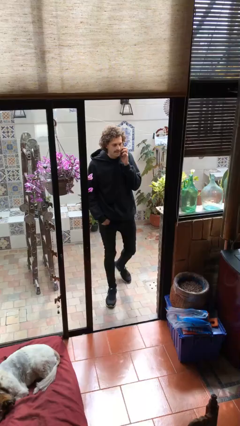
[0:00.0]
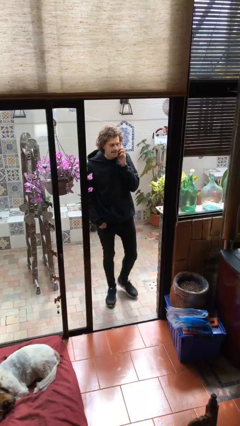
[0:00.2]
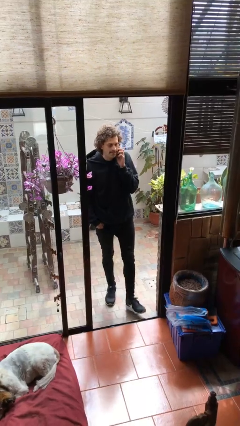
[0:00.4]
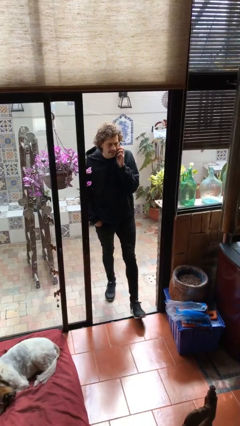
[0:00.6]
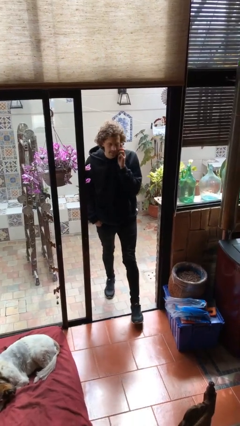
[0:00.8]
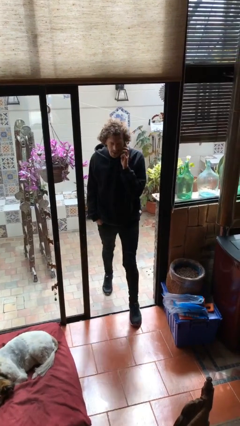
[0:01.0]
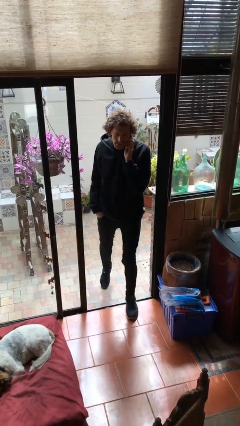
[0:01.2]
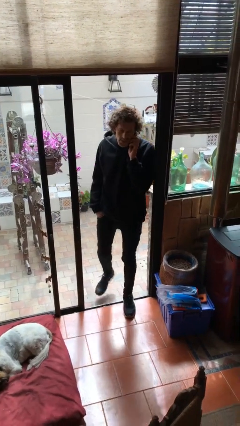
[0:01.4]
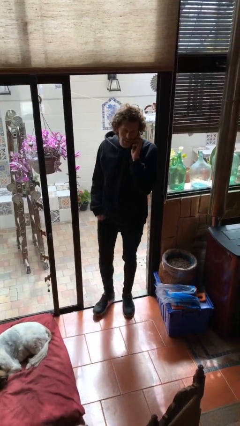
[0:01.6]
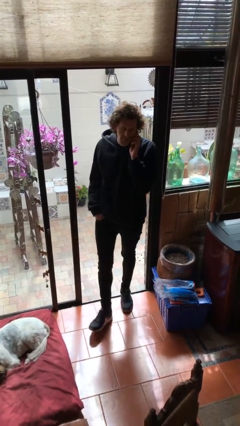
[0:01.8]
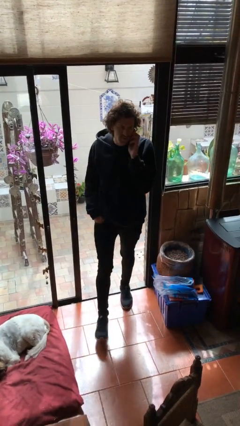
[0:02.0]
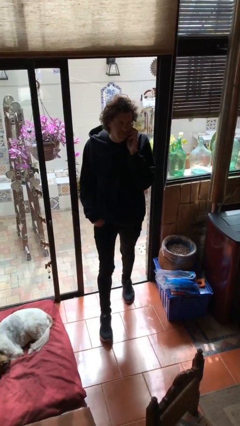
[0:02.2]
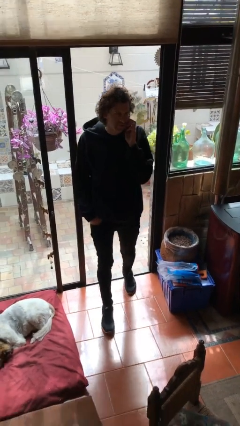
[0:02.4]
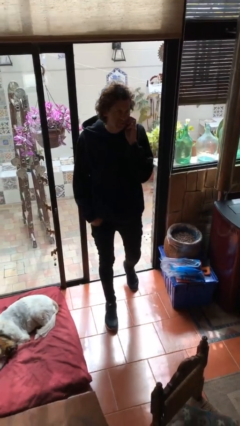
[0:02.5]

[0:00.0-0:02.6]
person enters scene through structure

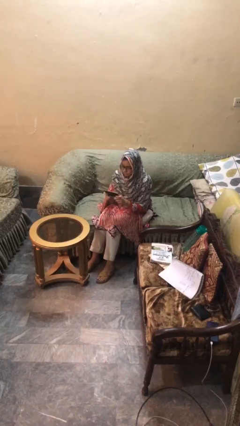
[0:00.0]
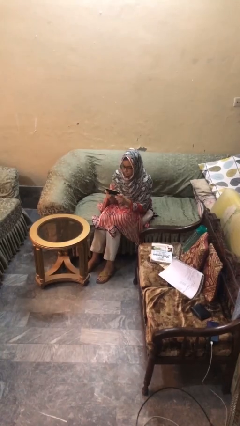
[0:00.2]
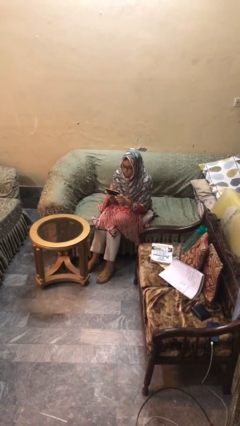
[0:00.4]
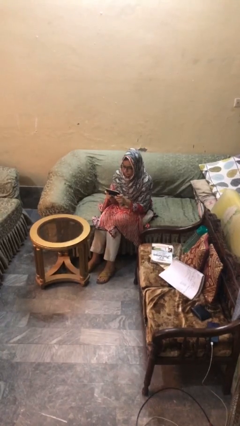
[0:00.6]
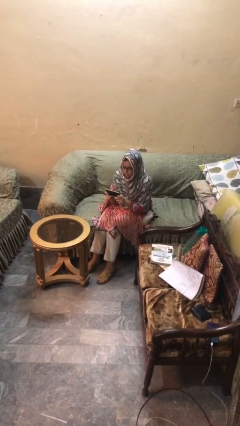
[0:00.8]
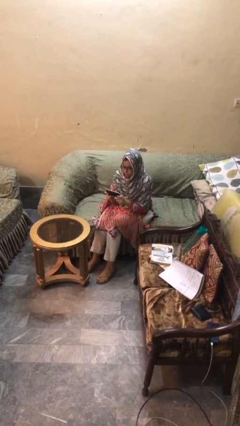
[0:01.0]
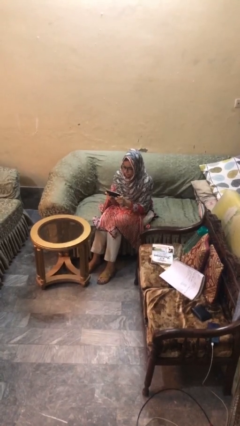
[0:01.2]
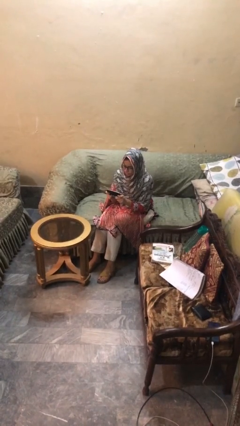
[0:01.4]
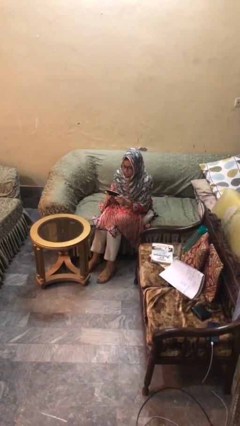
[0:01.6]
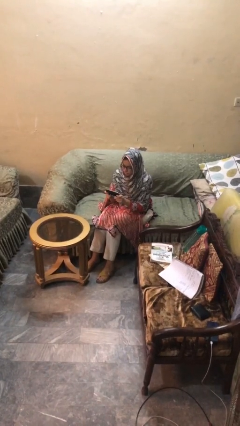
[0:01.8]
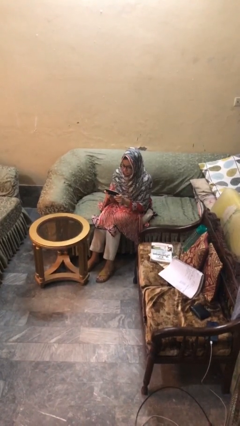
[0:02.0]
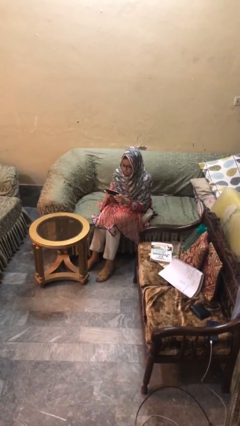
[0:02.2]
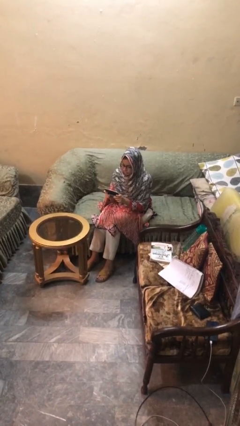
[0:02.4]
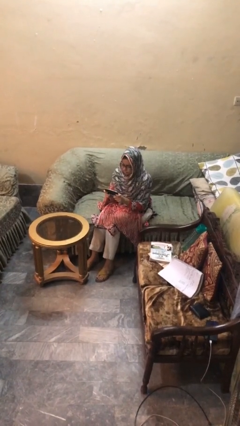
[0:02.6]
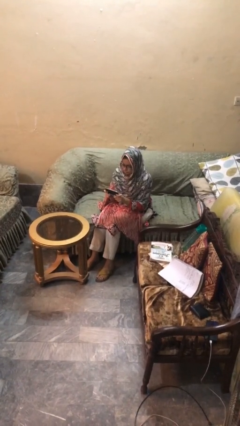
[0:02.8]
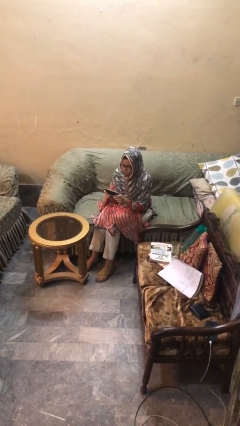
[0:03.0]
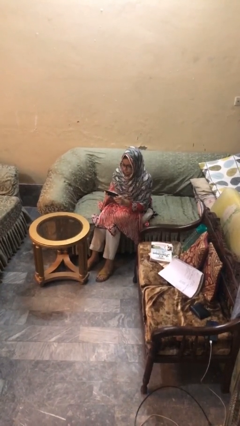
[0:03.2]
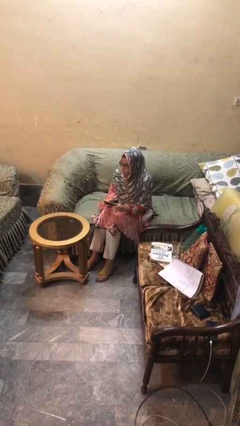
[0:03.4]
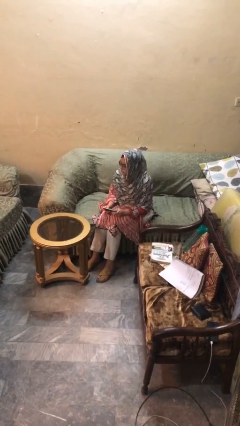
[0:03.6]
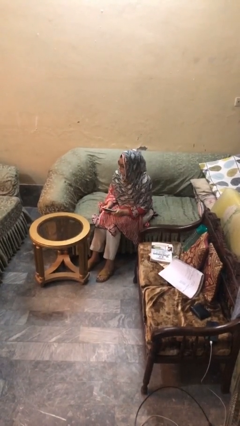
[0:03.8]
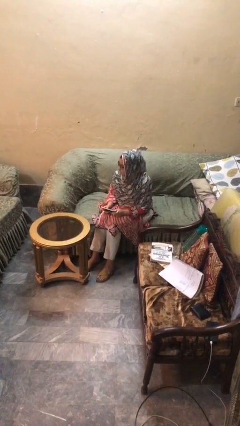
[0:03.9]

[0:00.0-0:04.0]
person interacts with handheld game

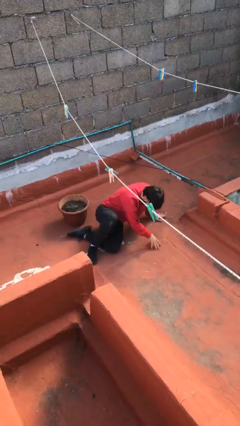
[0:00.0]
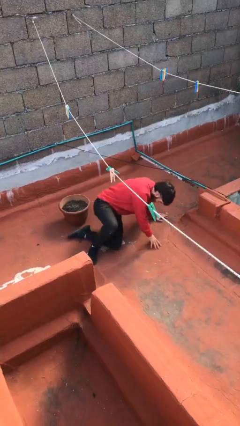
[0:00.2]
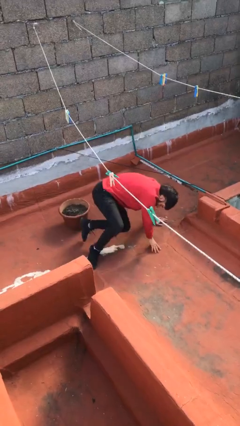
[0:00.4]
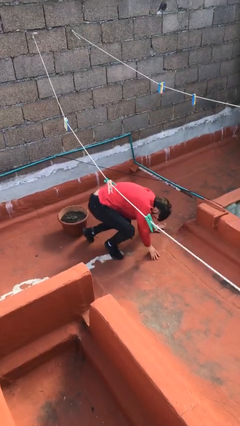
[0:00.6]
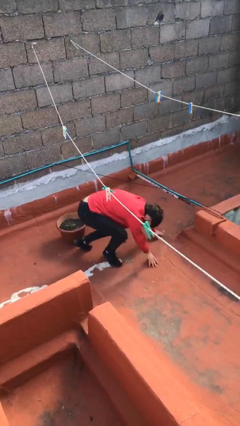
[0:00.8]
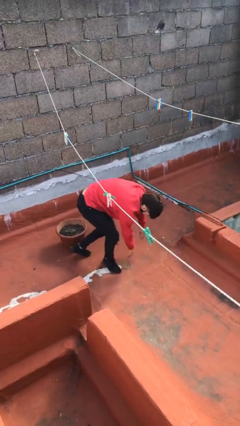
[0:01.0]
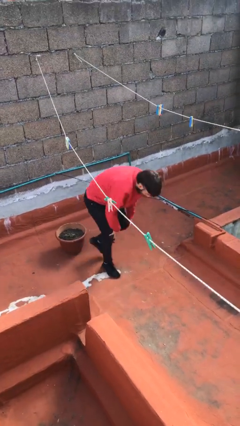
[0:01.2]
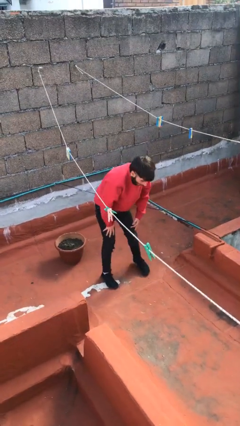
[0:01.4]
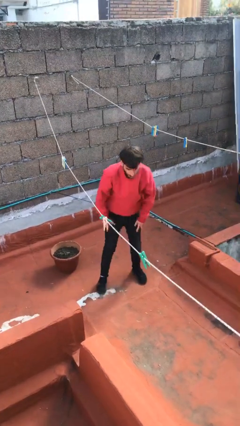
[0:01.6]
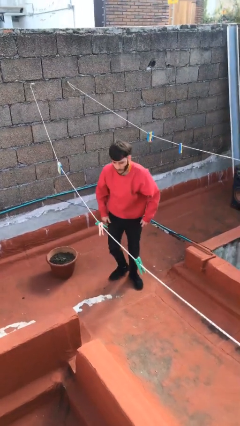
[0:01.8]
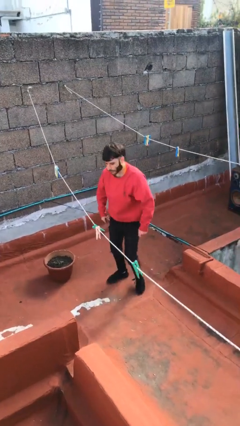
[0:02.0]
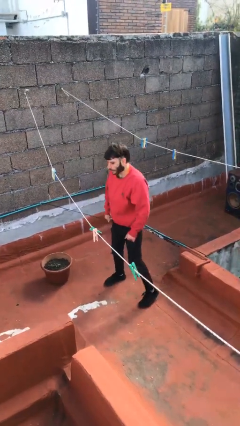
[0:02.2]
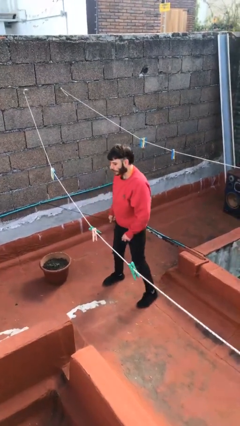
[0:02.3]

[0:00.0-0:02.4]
person stands up from floor

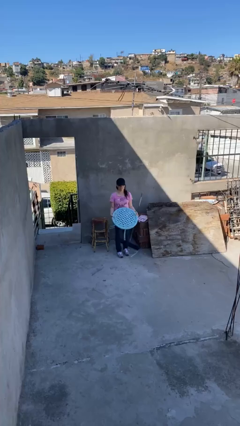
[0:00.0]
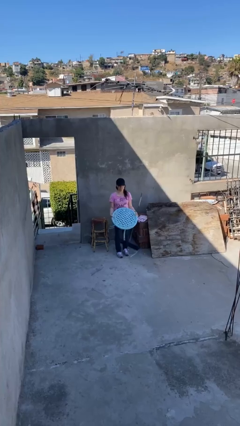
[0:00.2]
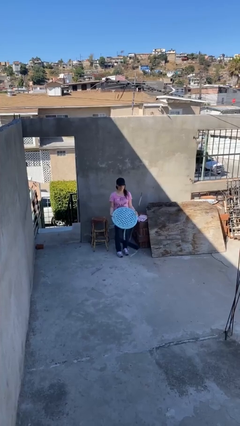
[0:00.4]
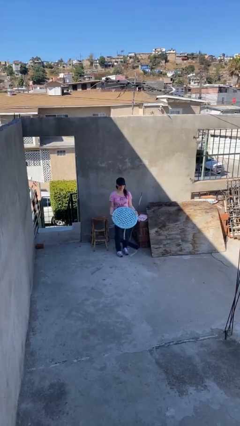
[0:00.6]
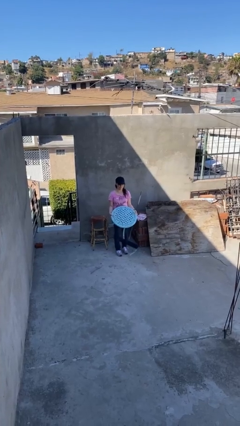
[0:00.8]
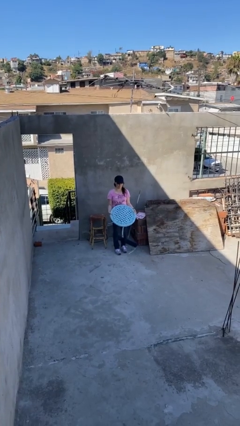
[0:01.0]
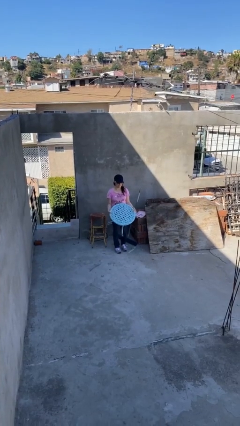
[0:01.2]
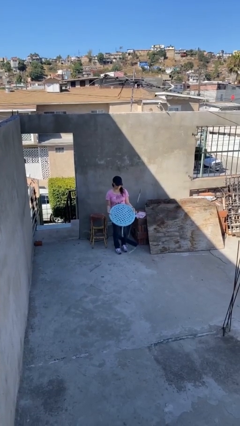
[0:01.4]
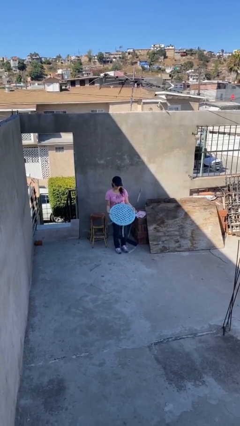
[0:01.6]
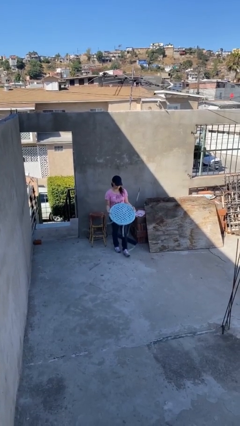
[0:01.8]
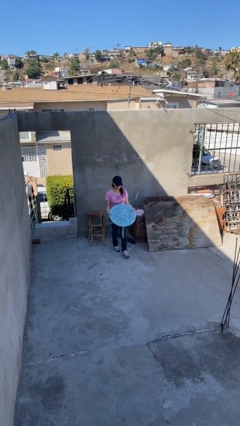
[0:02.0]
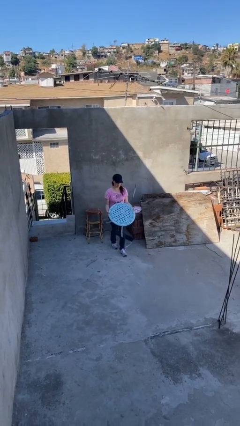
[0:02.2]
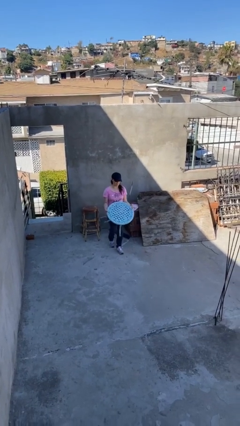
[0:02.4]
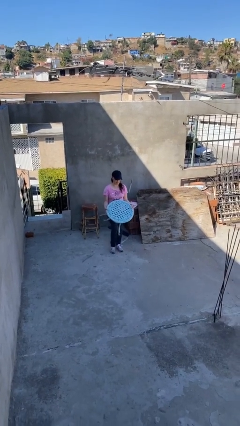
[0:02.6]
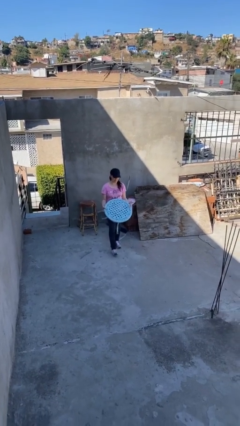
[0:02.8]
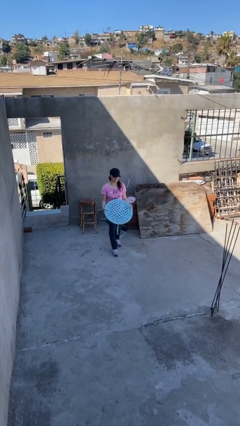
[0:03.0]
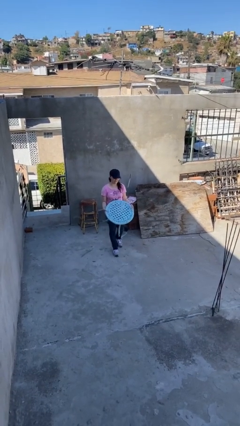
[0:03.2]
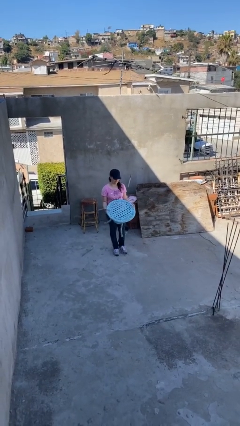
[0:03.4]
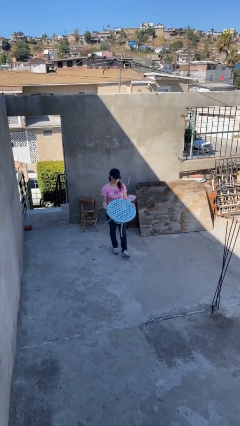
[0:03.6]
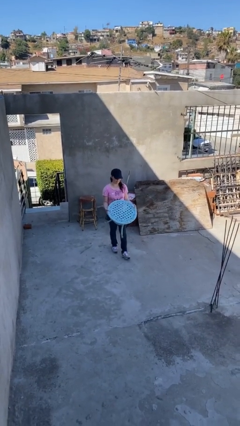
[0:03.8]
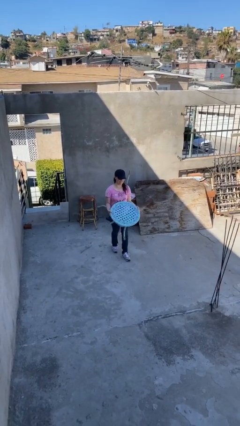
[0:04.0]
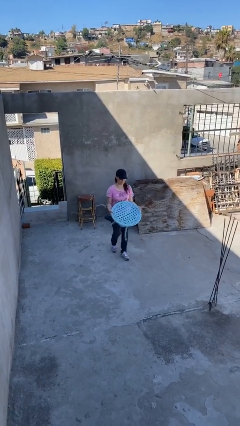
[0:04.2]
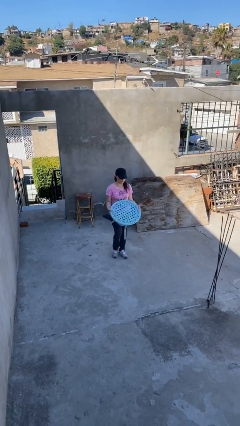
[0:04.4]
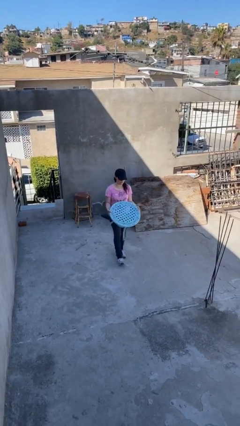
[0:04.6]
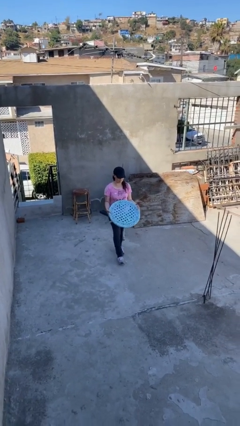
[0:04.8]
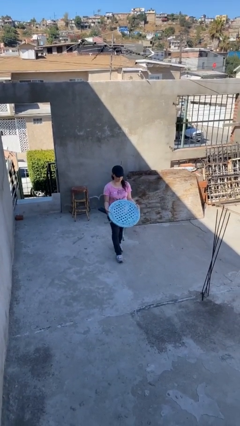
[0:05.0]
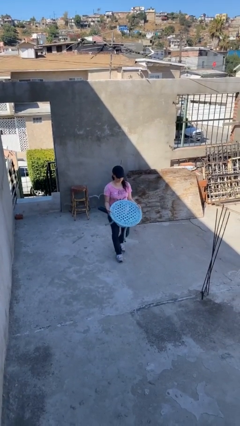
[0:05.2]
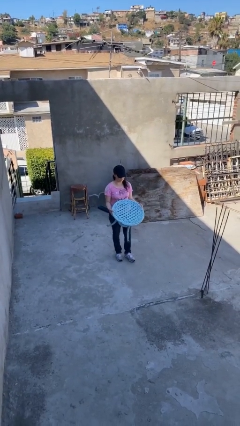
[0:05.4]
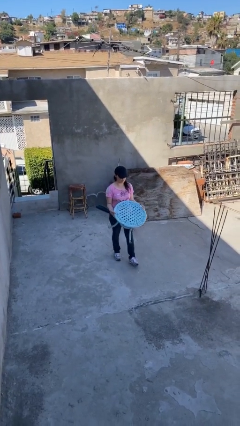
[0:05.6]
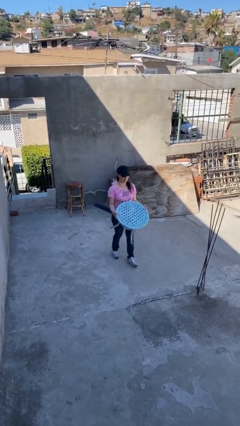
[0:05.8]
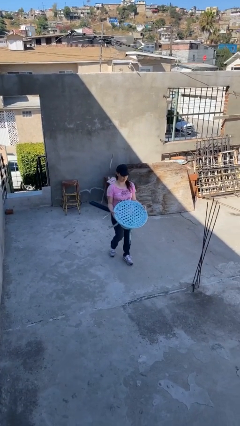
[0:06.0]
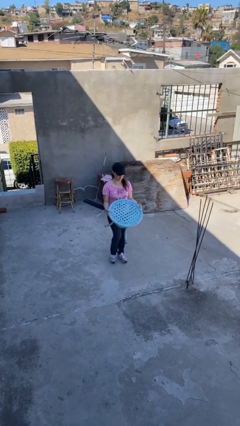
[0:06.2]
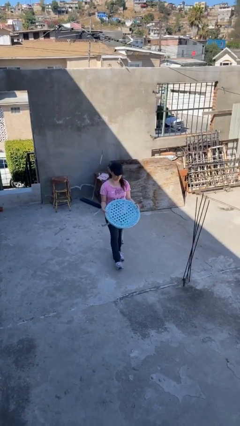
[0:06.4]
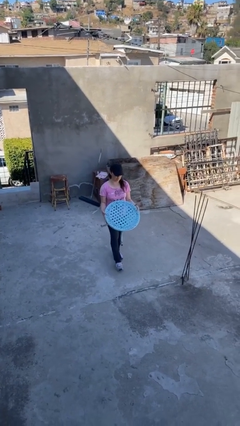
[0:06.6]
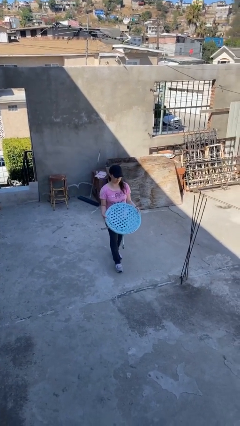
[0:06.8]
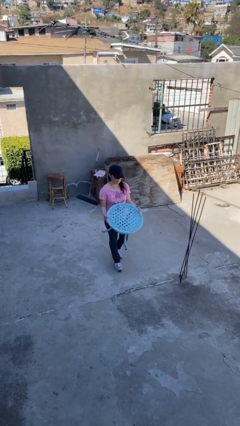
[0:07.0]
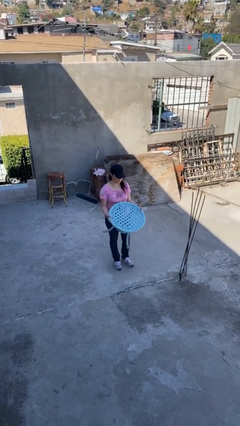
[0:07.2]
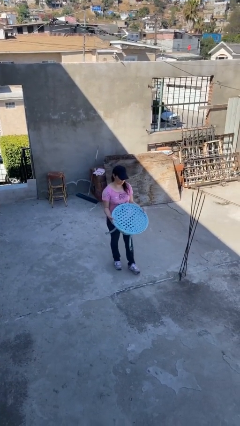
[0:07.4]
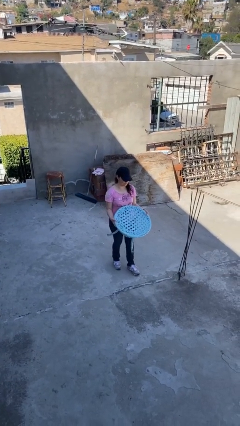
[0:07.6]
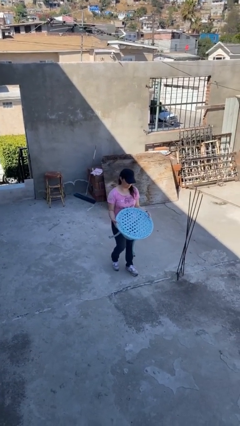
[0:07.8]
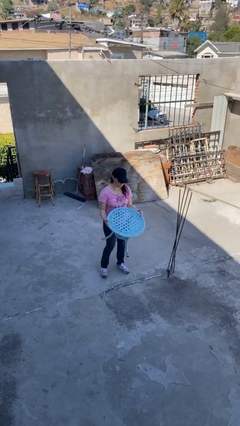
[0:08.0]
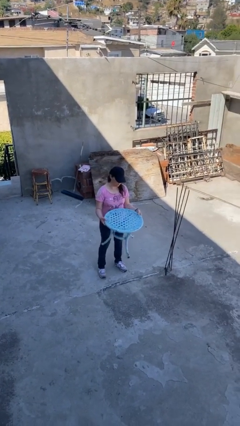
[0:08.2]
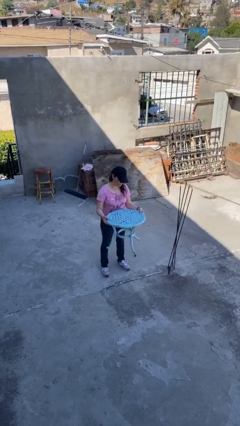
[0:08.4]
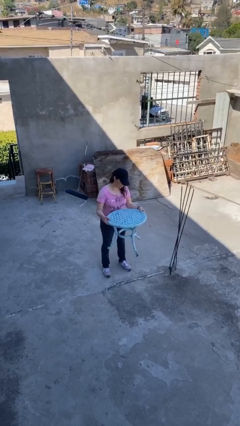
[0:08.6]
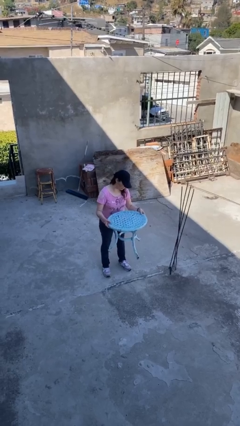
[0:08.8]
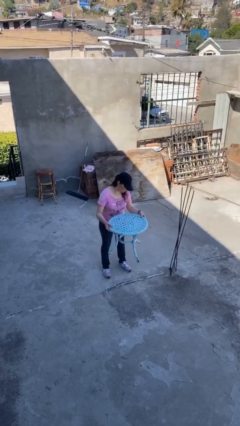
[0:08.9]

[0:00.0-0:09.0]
person carries heavy object
